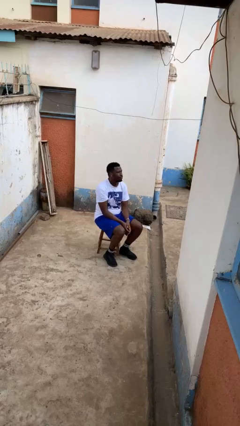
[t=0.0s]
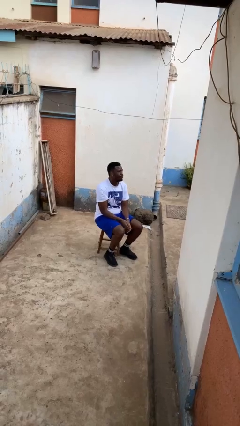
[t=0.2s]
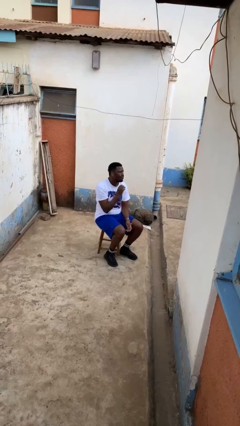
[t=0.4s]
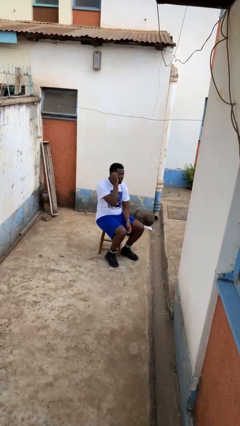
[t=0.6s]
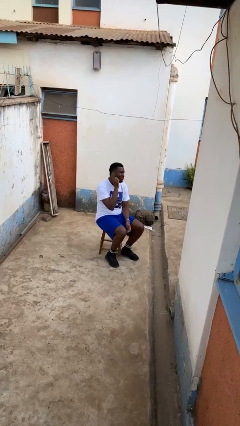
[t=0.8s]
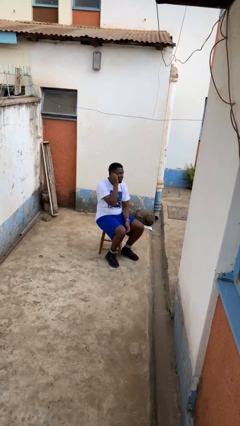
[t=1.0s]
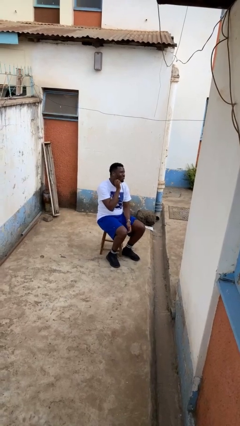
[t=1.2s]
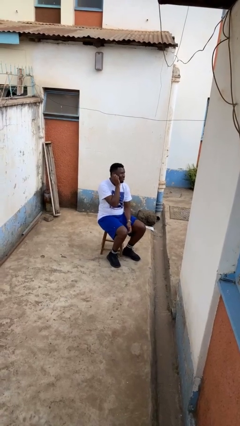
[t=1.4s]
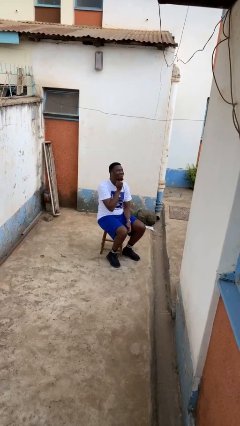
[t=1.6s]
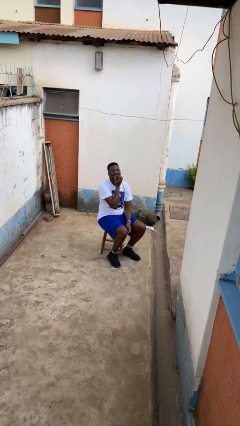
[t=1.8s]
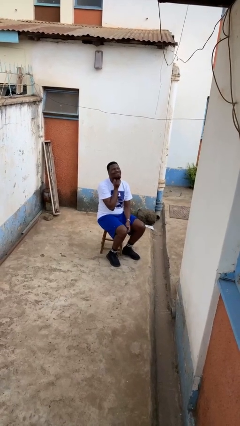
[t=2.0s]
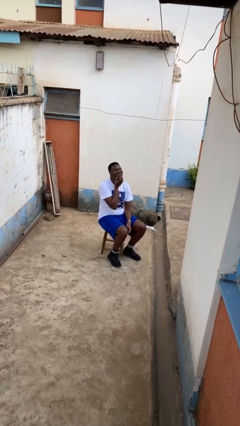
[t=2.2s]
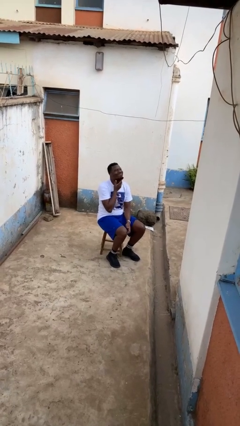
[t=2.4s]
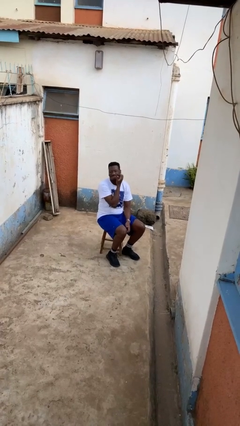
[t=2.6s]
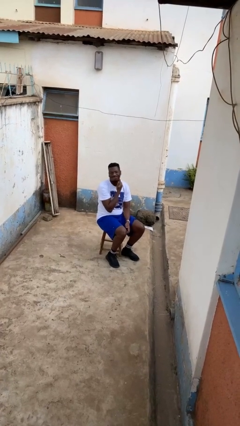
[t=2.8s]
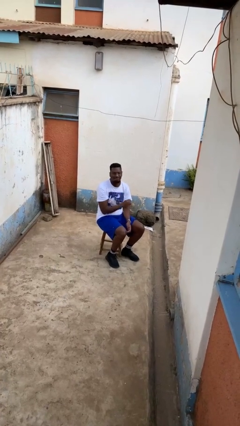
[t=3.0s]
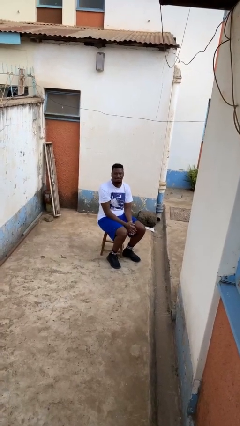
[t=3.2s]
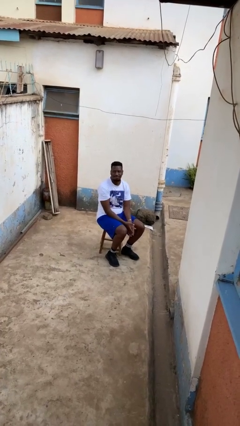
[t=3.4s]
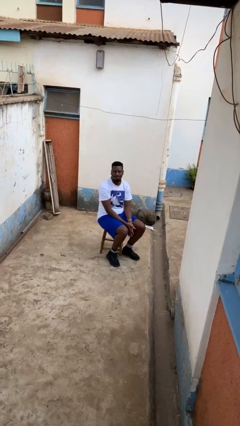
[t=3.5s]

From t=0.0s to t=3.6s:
person scratches face

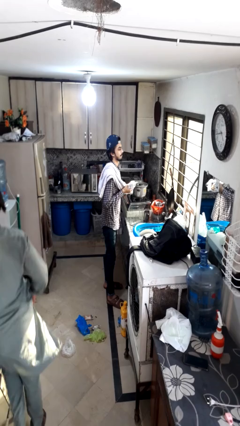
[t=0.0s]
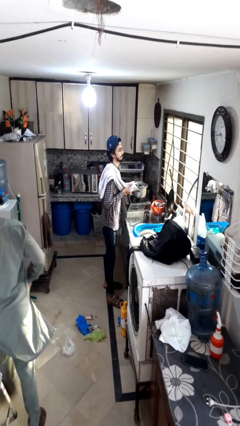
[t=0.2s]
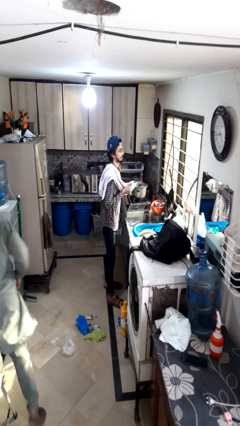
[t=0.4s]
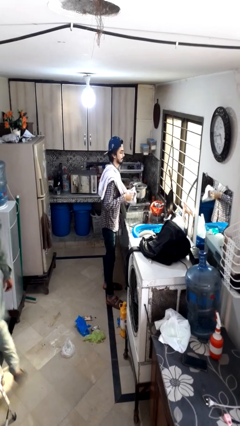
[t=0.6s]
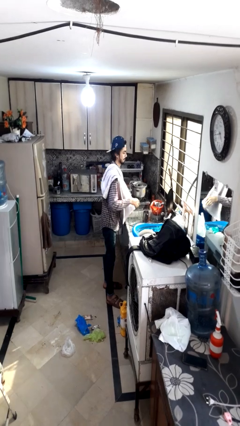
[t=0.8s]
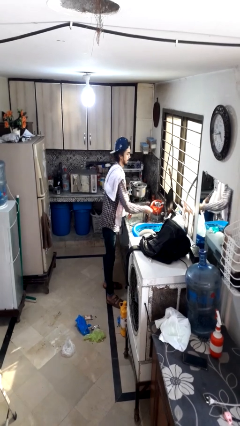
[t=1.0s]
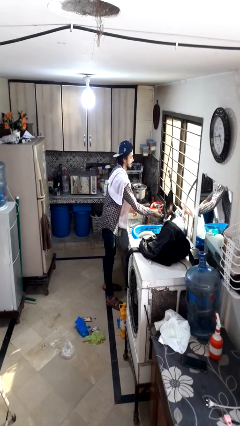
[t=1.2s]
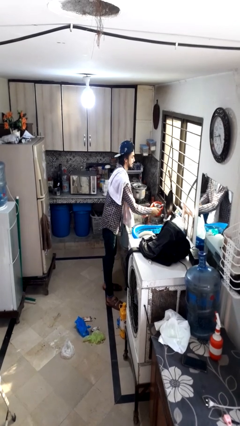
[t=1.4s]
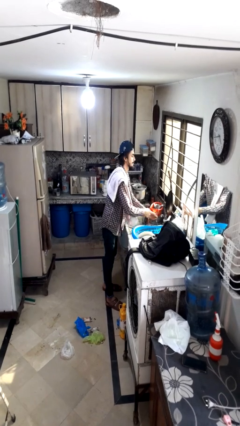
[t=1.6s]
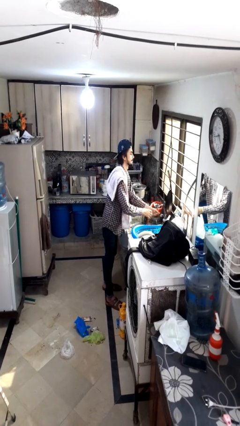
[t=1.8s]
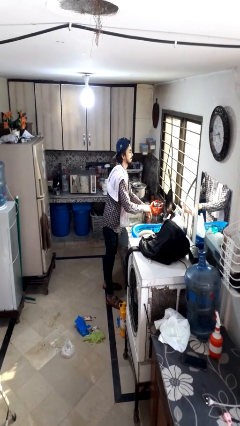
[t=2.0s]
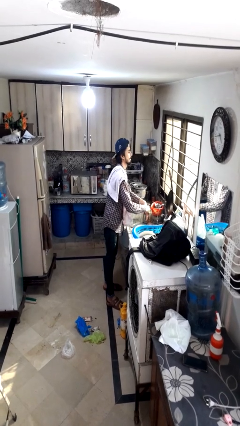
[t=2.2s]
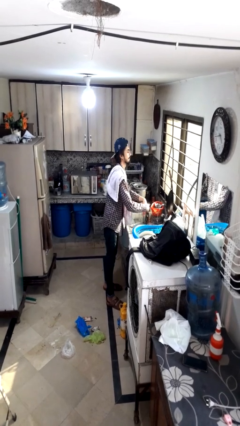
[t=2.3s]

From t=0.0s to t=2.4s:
person washes hands

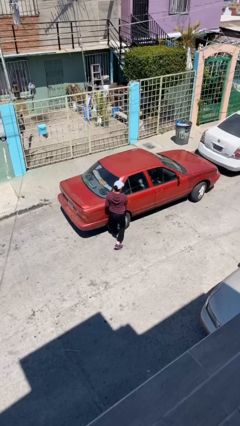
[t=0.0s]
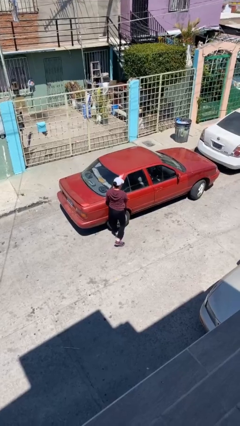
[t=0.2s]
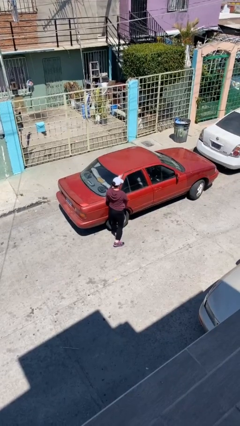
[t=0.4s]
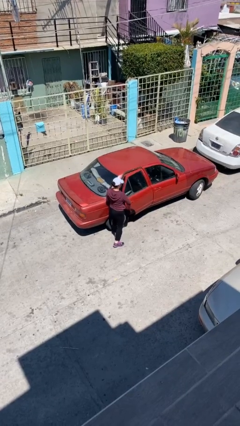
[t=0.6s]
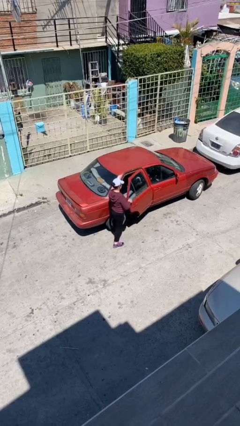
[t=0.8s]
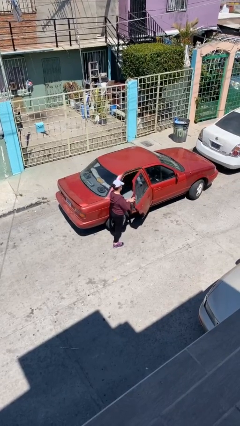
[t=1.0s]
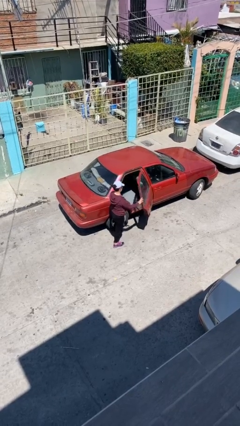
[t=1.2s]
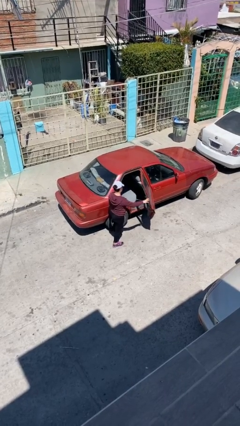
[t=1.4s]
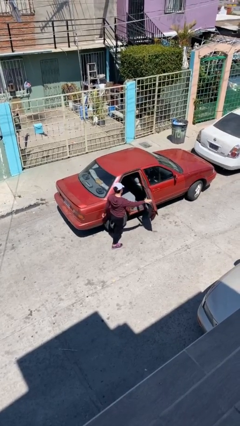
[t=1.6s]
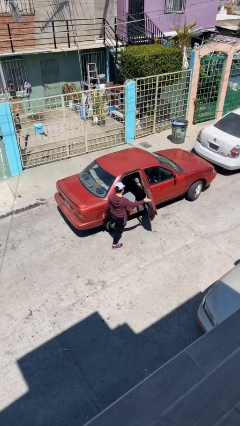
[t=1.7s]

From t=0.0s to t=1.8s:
person opens car door

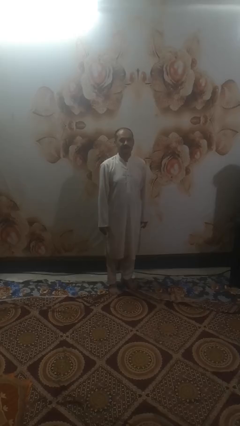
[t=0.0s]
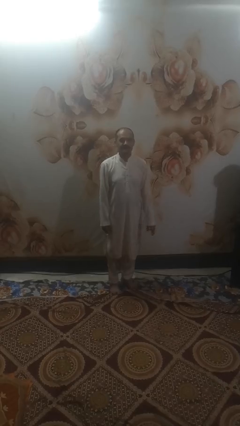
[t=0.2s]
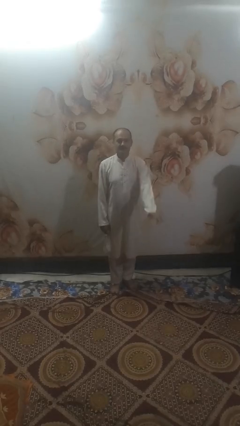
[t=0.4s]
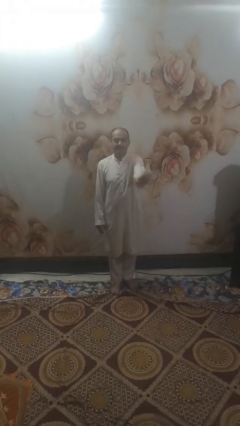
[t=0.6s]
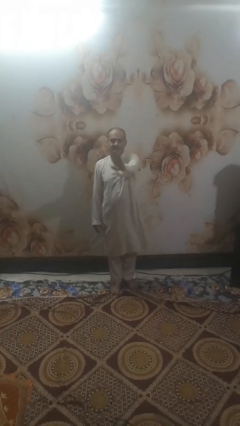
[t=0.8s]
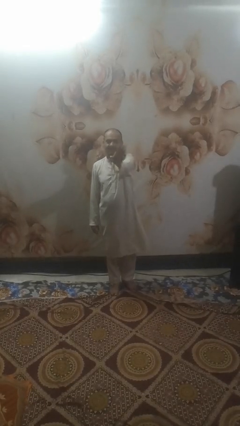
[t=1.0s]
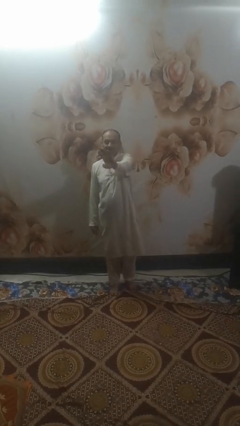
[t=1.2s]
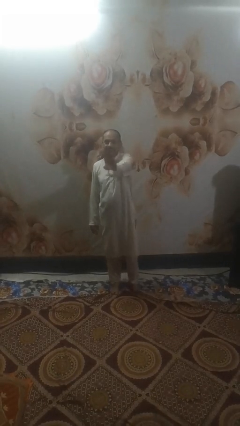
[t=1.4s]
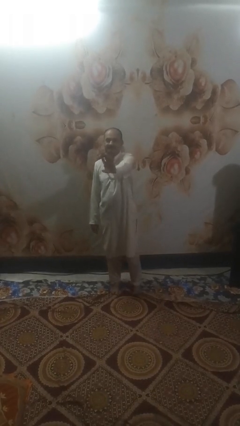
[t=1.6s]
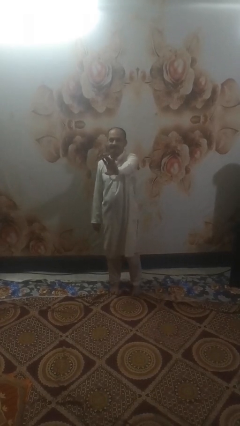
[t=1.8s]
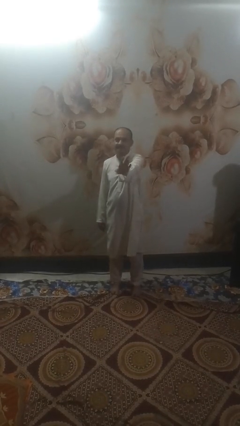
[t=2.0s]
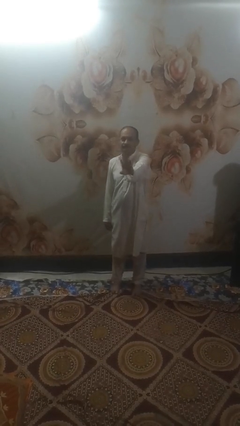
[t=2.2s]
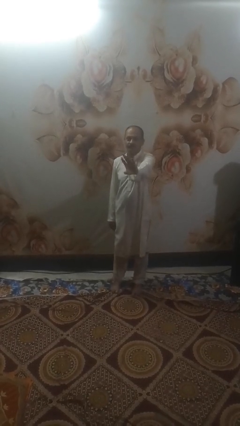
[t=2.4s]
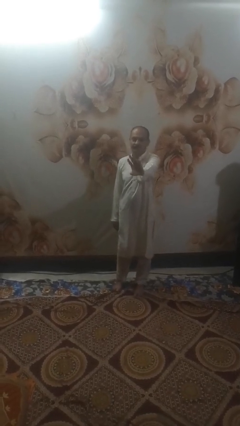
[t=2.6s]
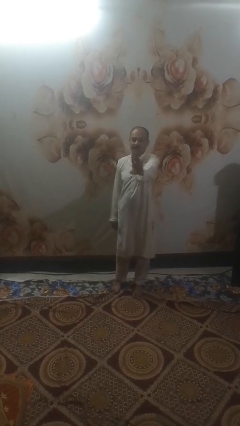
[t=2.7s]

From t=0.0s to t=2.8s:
person waves at person

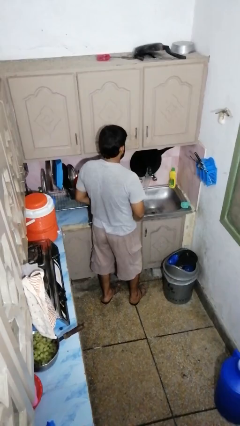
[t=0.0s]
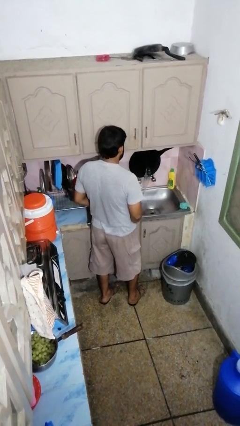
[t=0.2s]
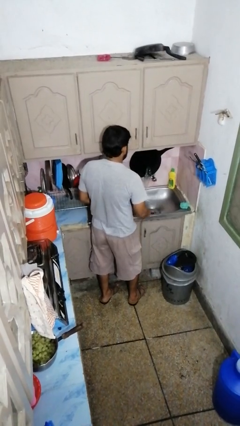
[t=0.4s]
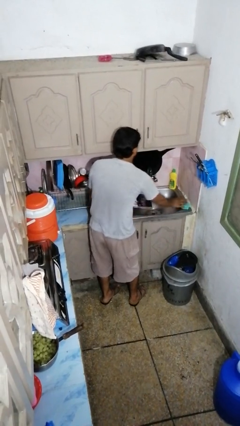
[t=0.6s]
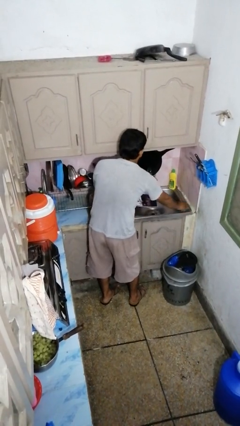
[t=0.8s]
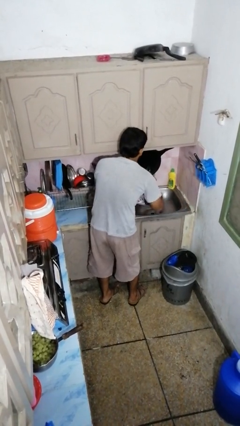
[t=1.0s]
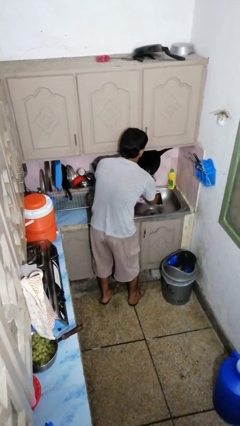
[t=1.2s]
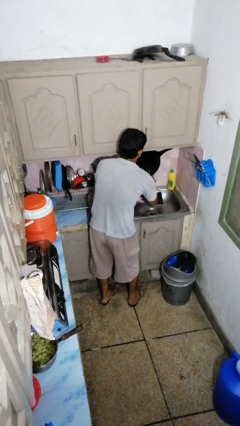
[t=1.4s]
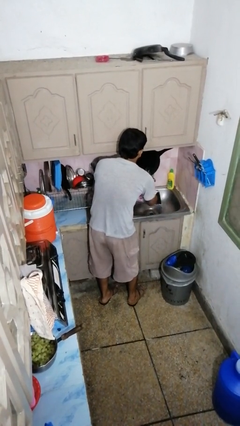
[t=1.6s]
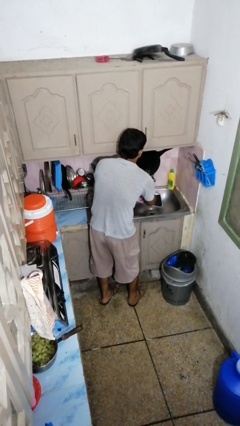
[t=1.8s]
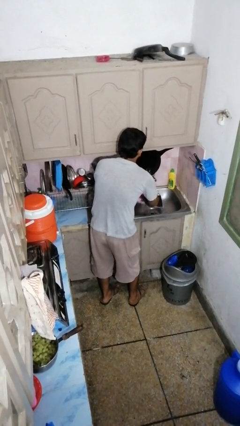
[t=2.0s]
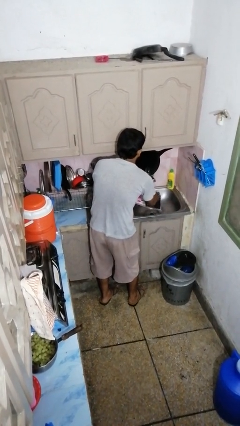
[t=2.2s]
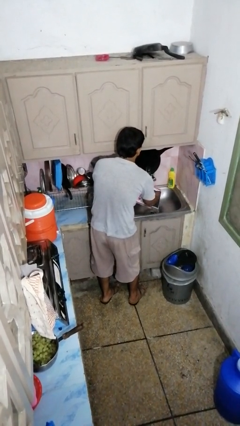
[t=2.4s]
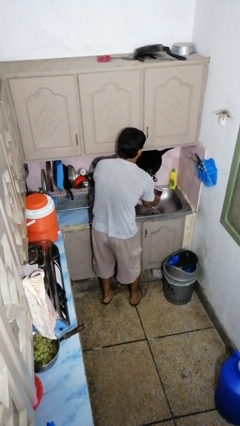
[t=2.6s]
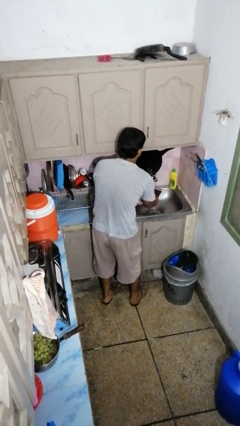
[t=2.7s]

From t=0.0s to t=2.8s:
person washes dish

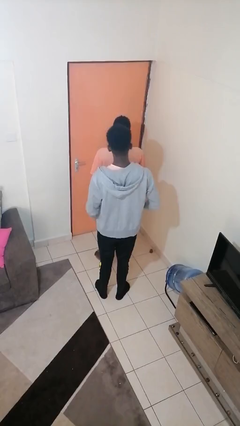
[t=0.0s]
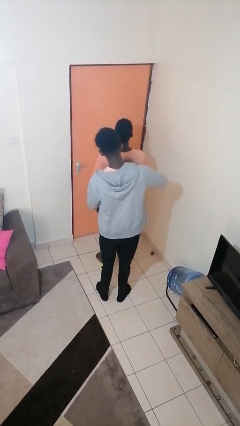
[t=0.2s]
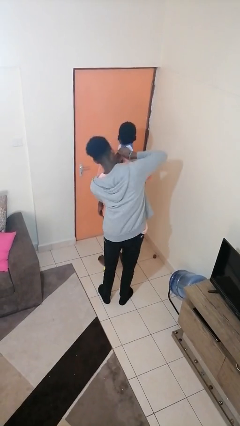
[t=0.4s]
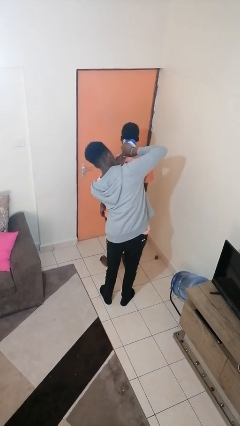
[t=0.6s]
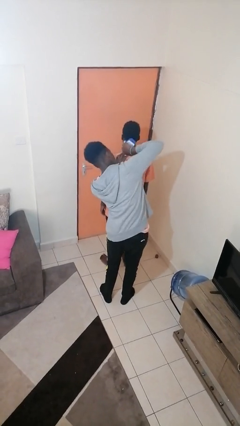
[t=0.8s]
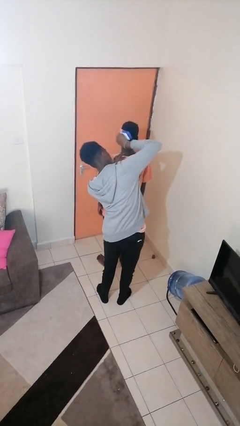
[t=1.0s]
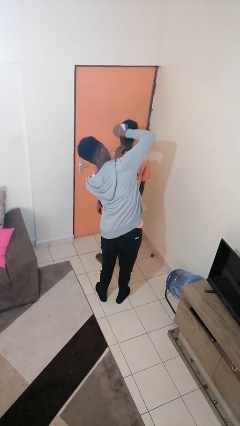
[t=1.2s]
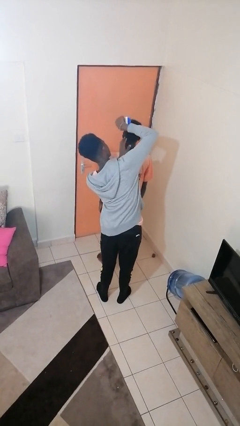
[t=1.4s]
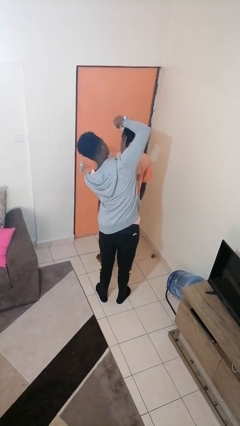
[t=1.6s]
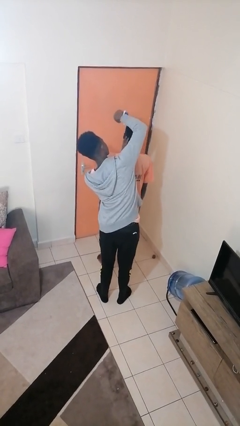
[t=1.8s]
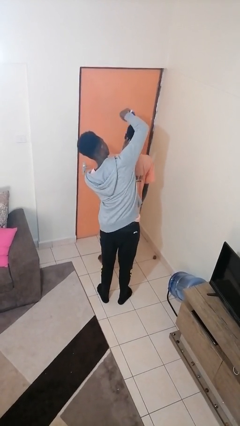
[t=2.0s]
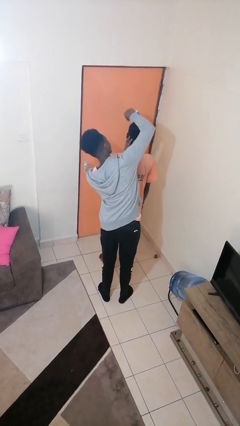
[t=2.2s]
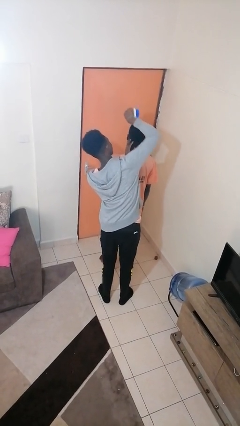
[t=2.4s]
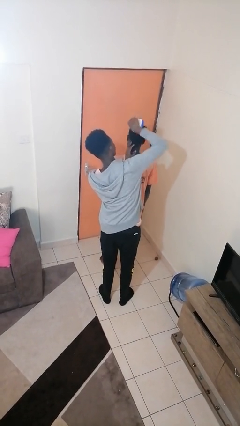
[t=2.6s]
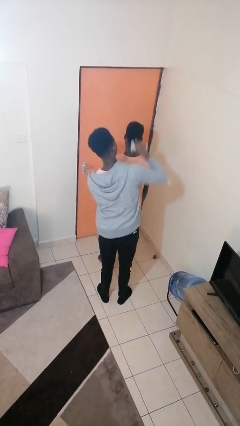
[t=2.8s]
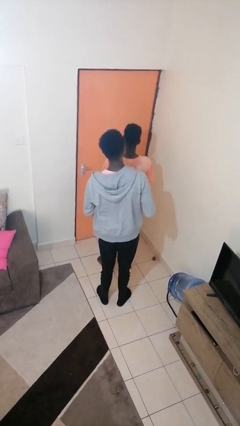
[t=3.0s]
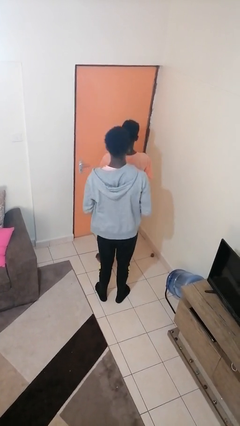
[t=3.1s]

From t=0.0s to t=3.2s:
person brushes hair of person

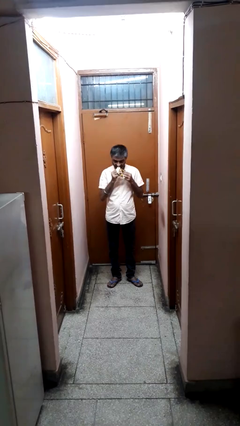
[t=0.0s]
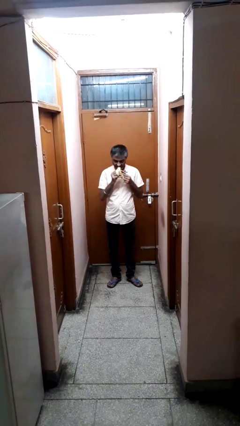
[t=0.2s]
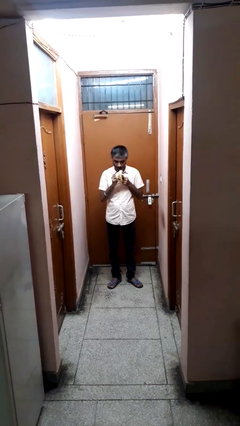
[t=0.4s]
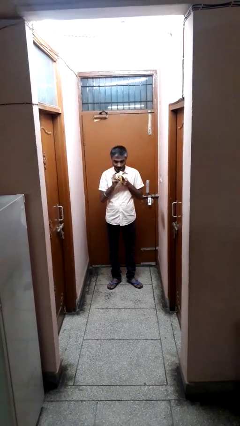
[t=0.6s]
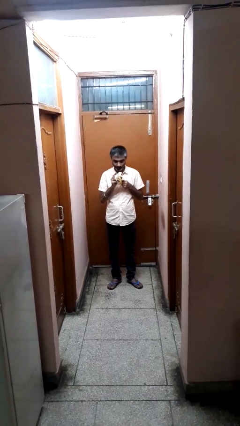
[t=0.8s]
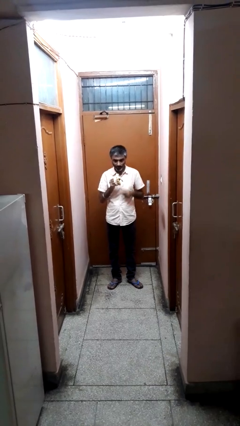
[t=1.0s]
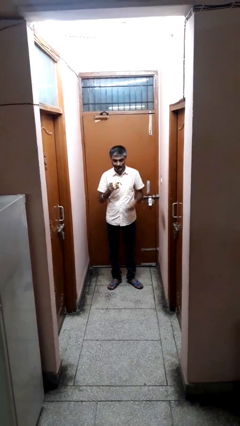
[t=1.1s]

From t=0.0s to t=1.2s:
person eats banana
